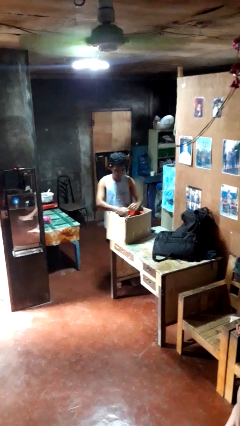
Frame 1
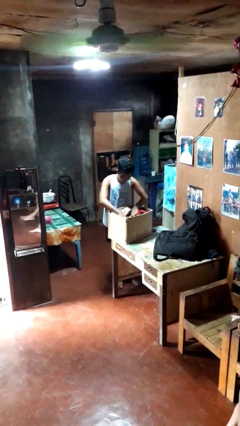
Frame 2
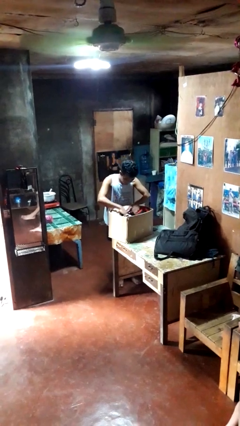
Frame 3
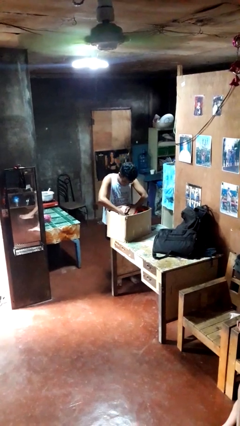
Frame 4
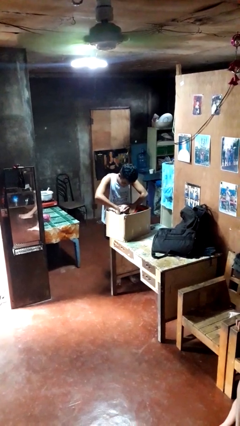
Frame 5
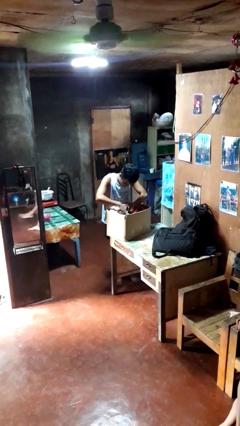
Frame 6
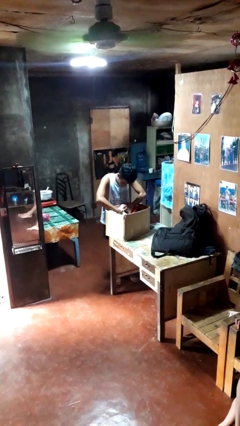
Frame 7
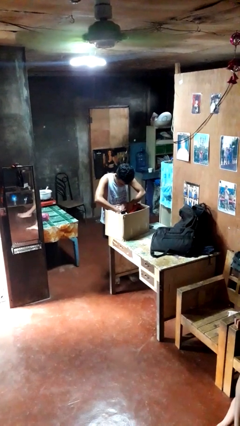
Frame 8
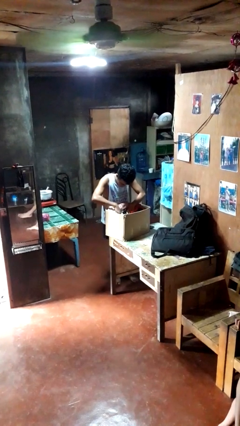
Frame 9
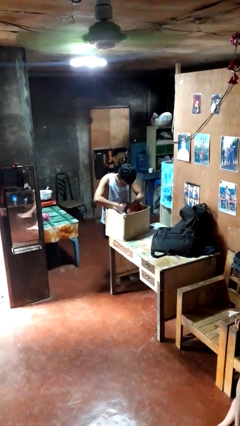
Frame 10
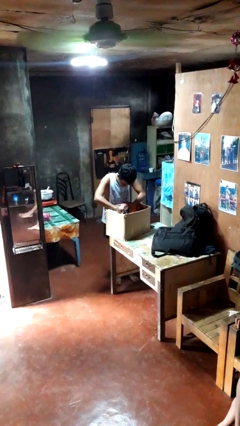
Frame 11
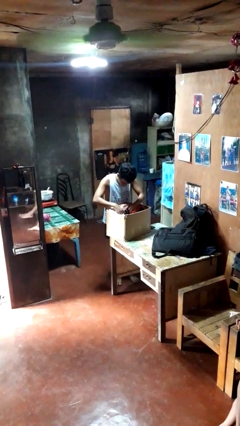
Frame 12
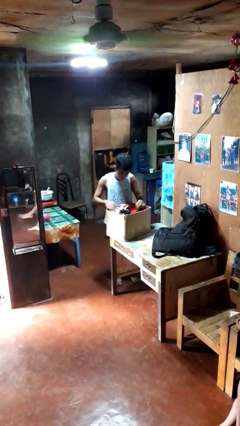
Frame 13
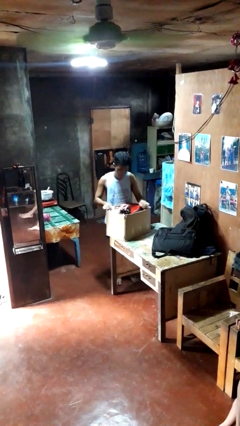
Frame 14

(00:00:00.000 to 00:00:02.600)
person searches in box

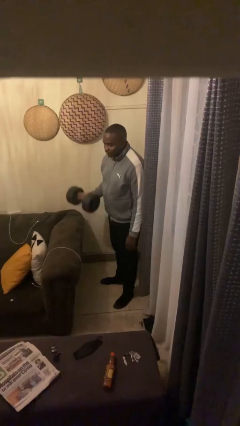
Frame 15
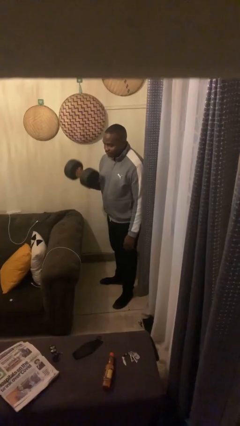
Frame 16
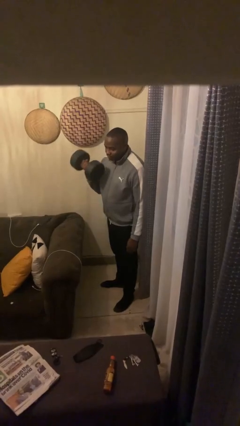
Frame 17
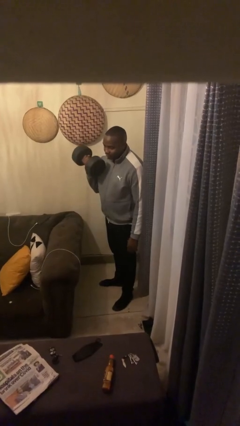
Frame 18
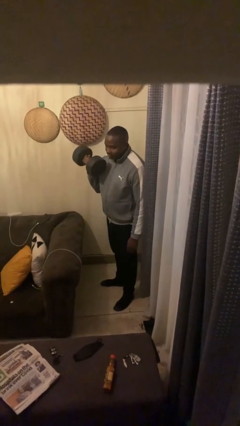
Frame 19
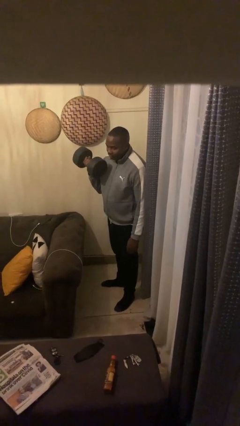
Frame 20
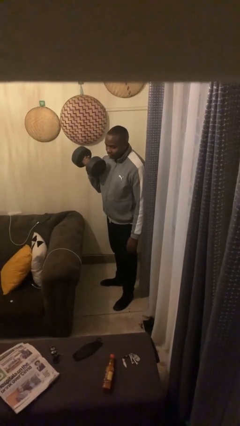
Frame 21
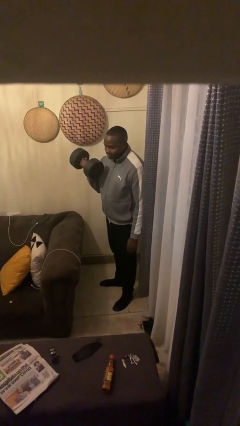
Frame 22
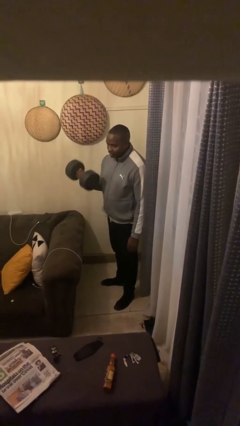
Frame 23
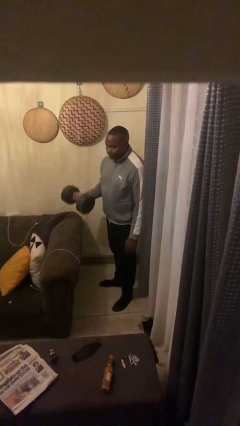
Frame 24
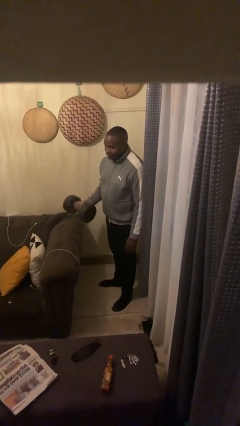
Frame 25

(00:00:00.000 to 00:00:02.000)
person lifts dumbbells

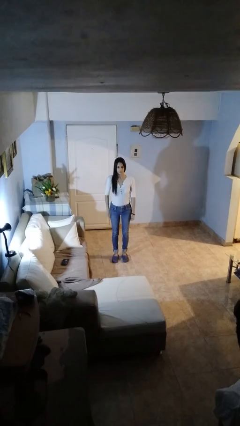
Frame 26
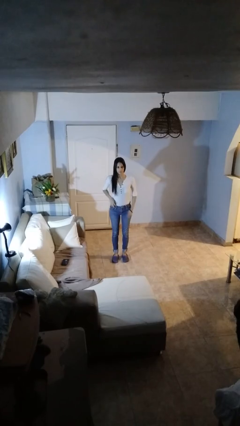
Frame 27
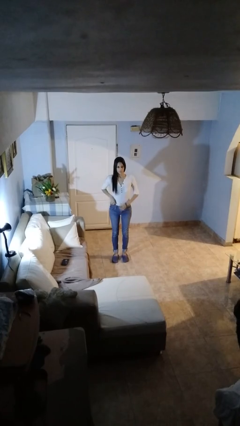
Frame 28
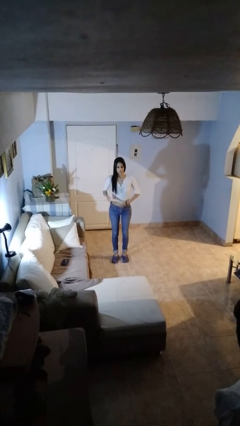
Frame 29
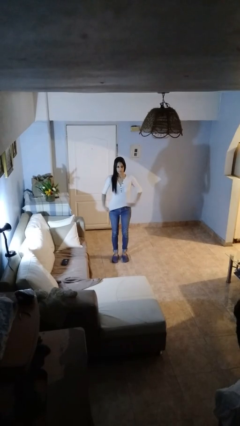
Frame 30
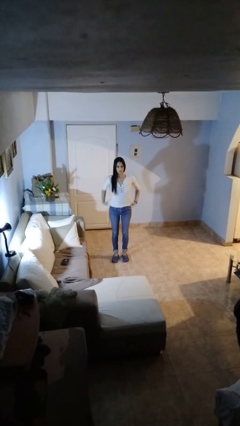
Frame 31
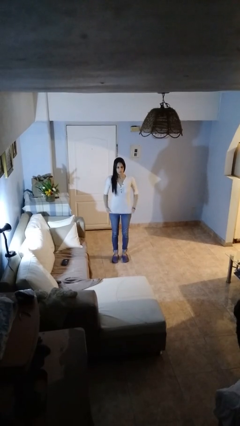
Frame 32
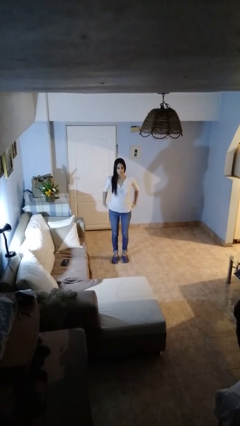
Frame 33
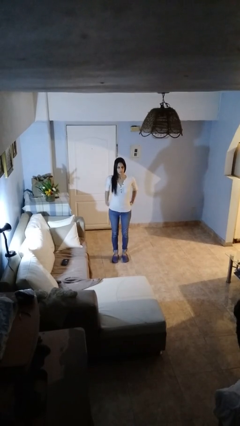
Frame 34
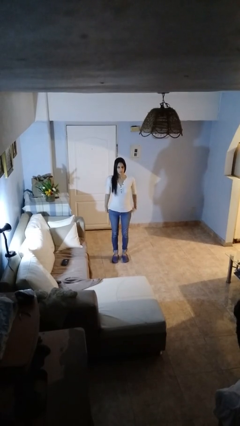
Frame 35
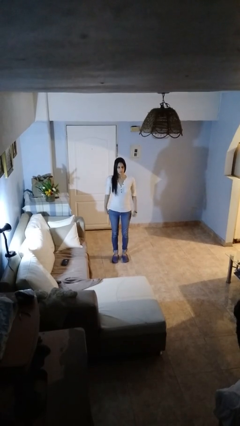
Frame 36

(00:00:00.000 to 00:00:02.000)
person untucks shirt

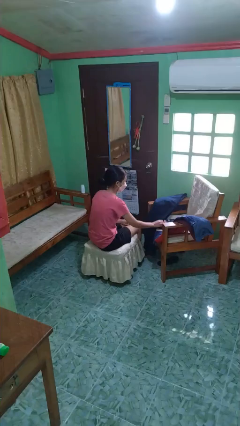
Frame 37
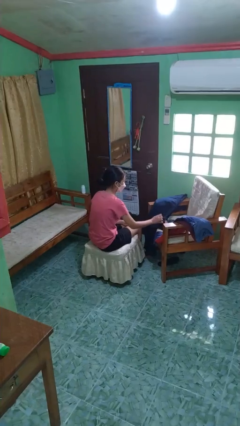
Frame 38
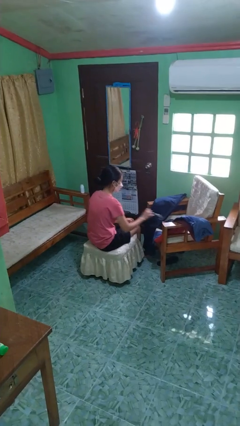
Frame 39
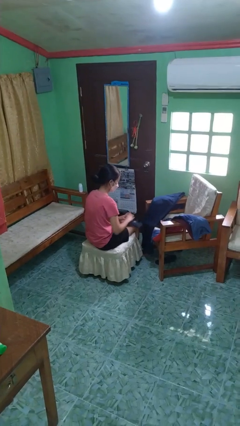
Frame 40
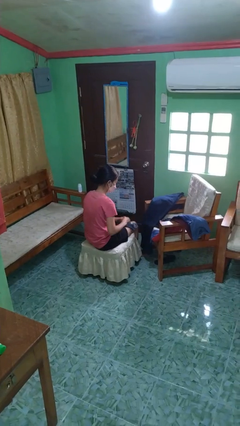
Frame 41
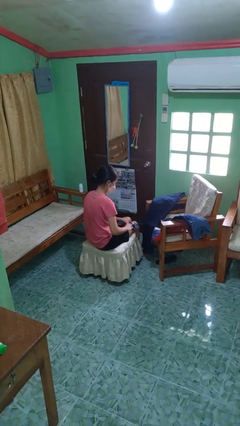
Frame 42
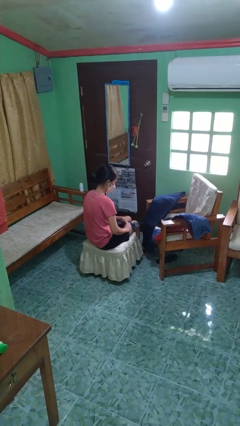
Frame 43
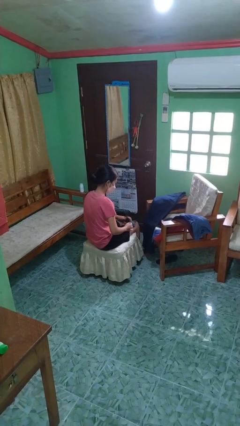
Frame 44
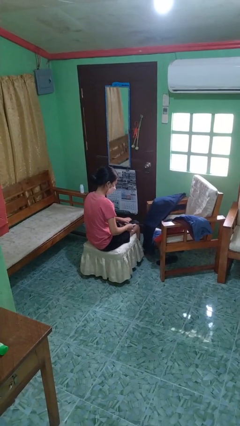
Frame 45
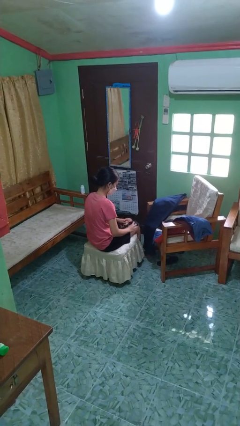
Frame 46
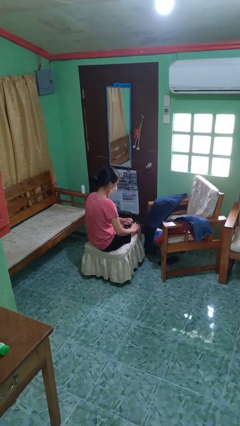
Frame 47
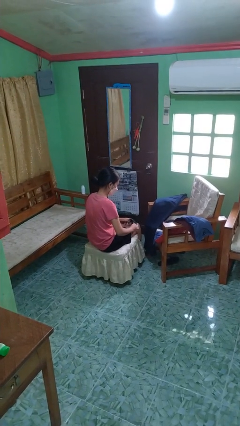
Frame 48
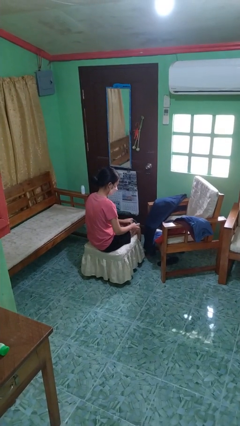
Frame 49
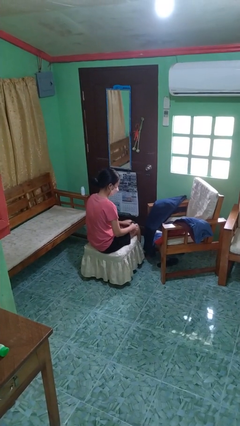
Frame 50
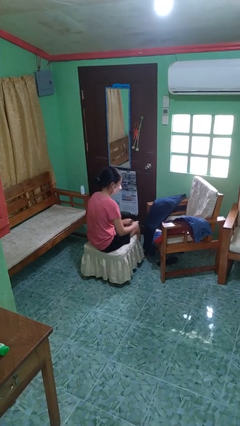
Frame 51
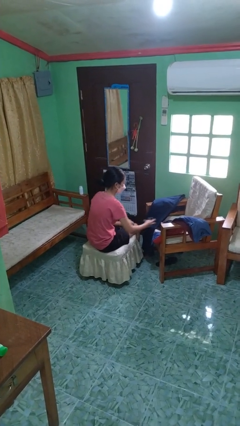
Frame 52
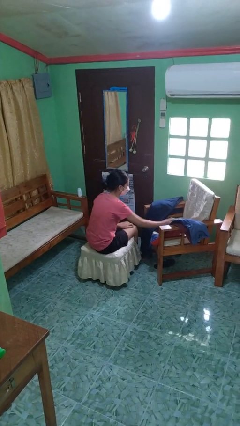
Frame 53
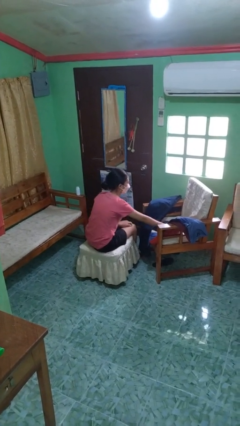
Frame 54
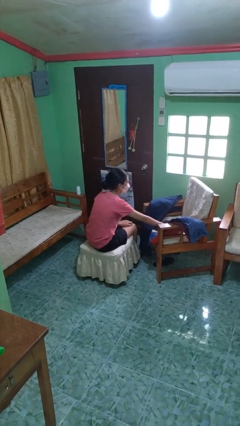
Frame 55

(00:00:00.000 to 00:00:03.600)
person folds socks

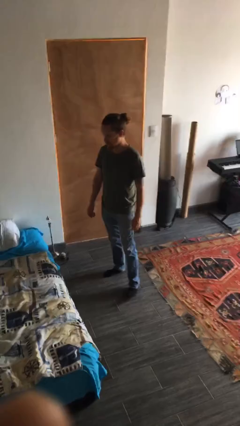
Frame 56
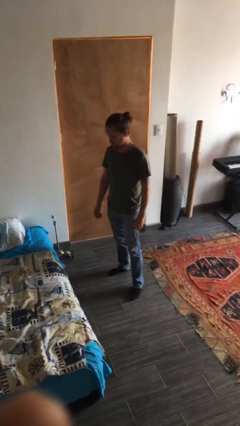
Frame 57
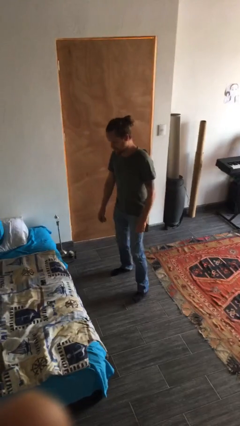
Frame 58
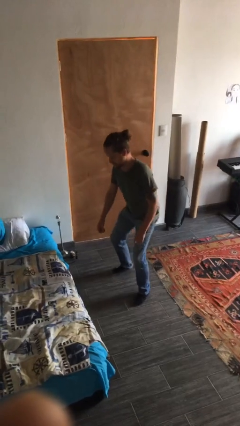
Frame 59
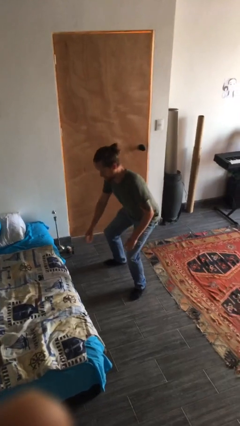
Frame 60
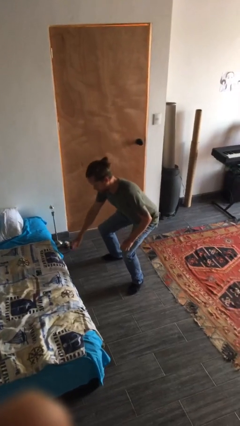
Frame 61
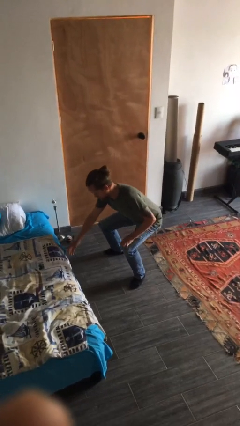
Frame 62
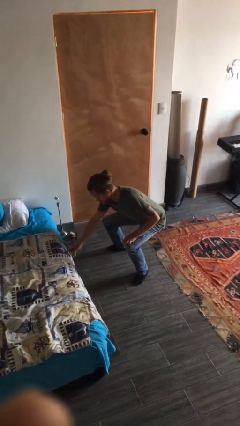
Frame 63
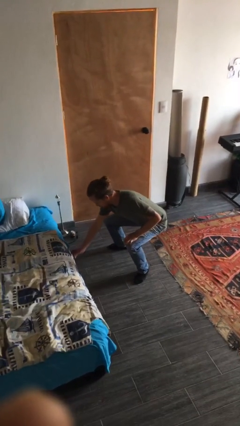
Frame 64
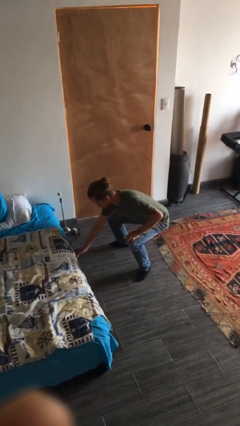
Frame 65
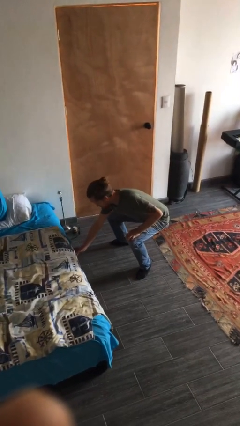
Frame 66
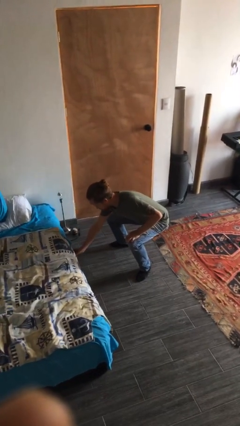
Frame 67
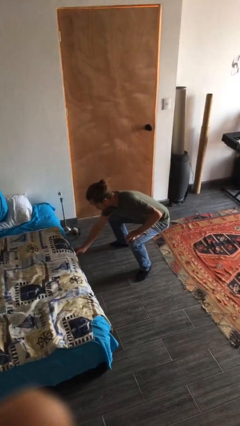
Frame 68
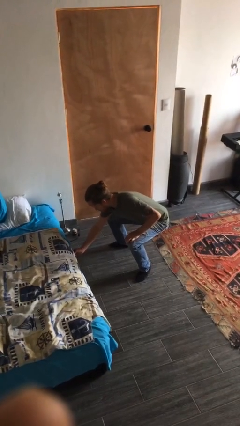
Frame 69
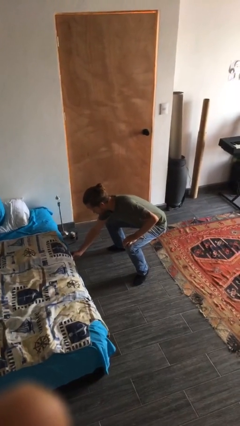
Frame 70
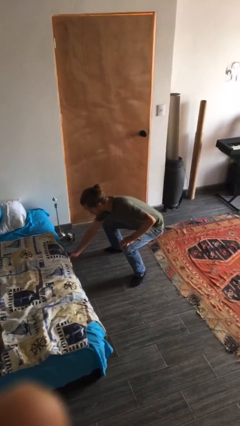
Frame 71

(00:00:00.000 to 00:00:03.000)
person squats

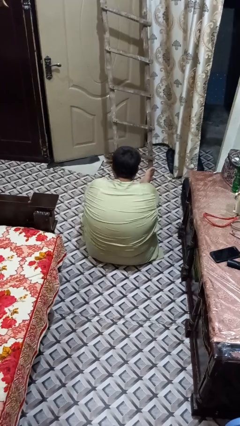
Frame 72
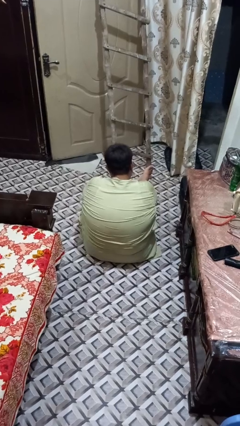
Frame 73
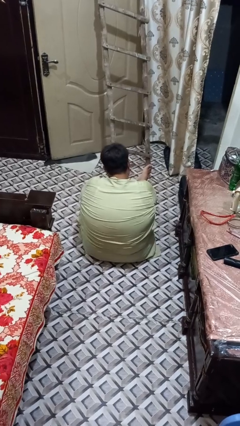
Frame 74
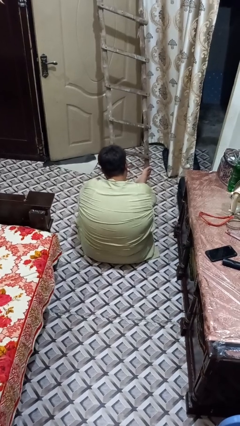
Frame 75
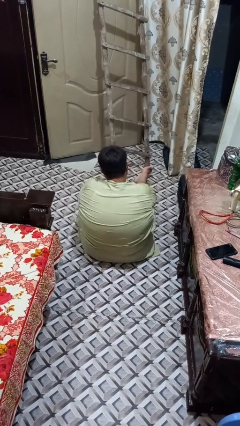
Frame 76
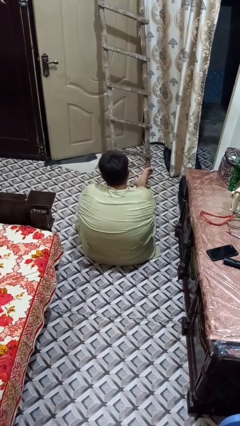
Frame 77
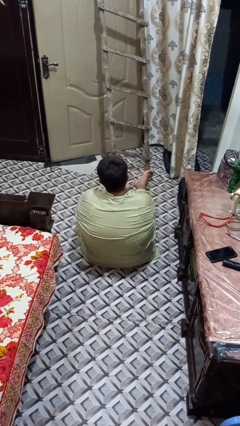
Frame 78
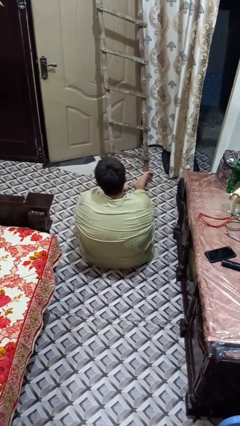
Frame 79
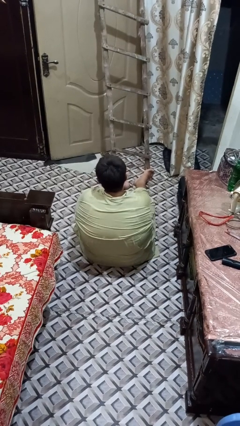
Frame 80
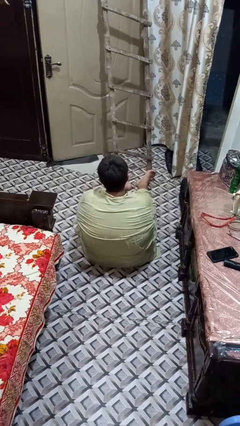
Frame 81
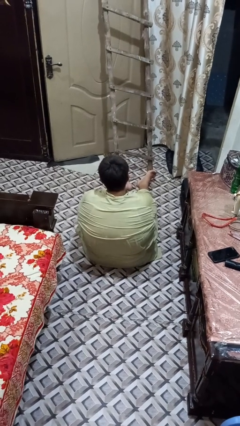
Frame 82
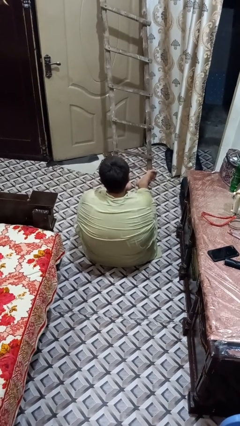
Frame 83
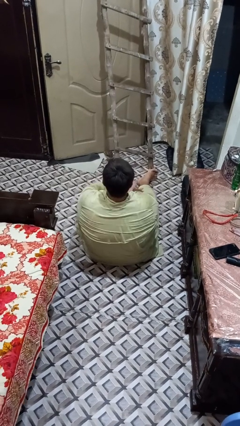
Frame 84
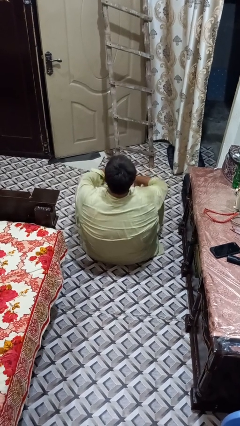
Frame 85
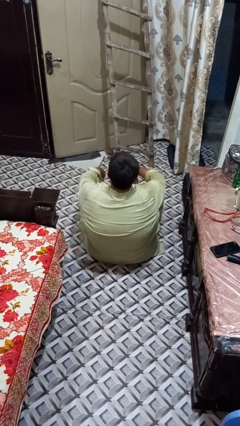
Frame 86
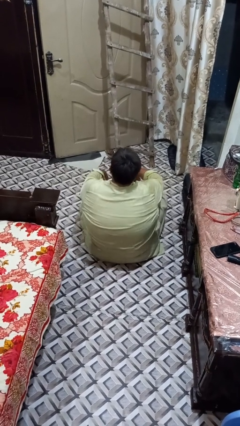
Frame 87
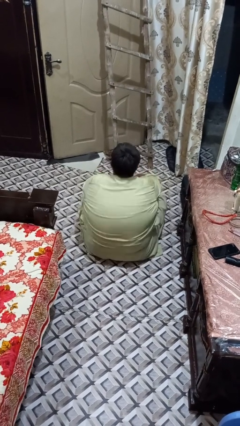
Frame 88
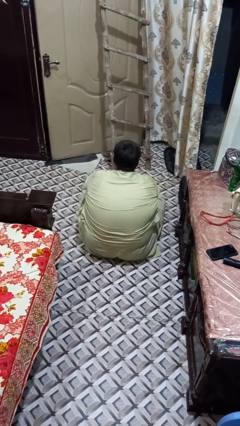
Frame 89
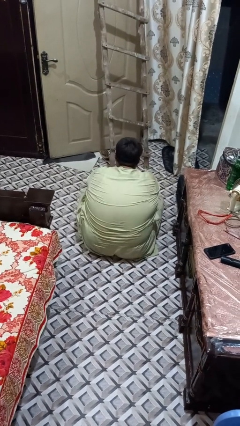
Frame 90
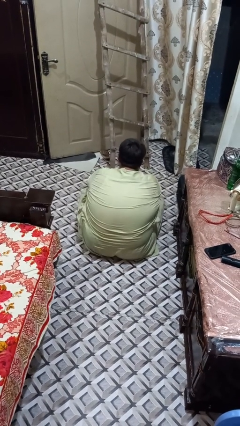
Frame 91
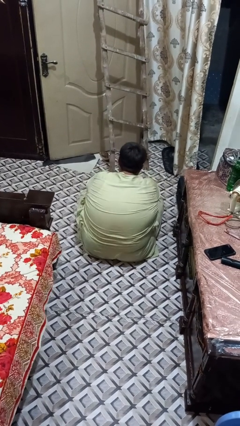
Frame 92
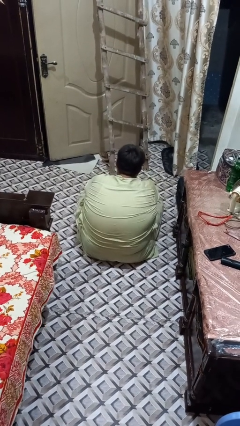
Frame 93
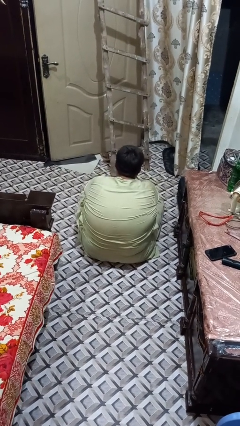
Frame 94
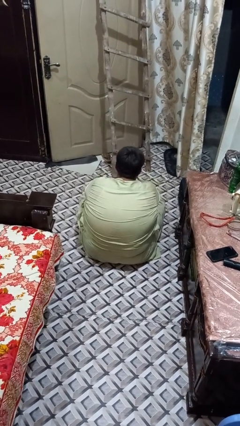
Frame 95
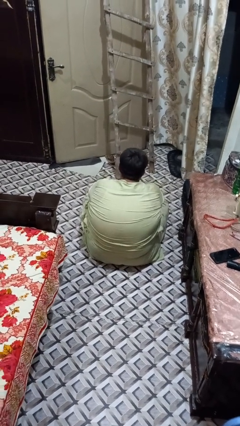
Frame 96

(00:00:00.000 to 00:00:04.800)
person crosses legs
